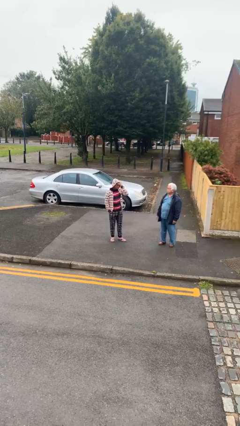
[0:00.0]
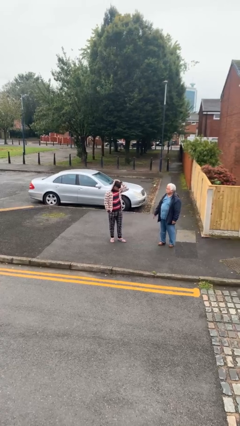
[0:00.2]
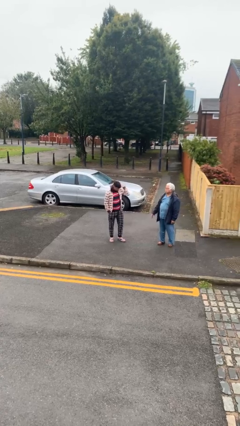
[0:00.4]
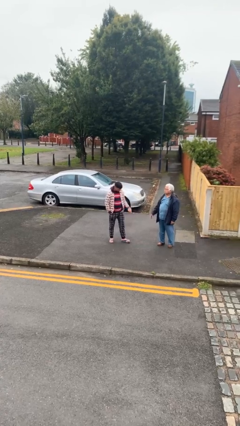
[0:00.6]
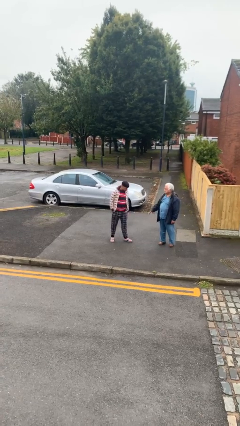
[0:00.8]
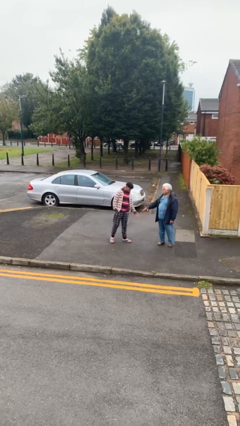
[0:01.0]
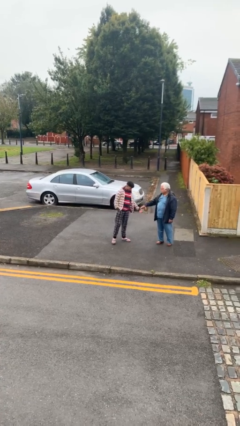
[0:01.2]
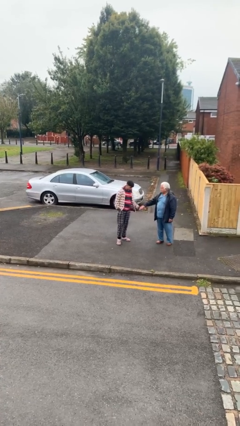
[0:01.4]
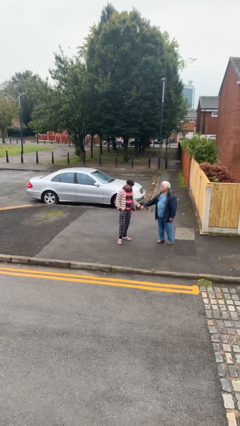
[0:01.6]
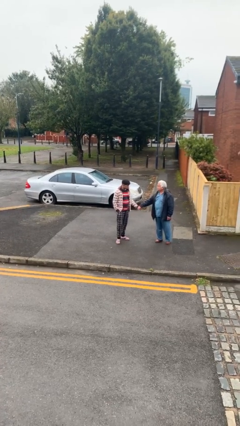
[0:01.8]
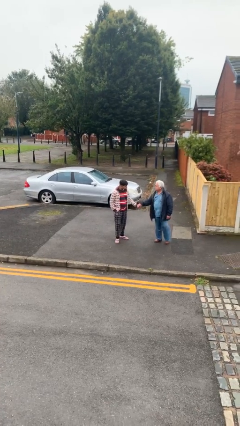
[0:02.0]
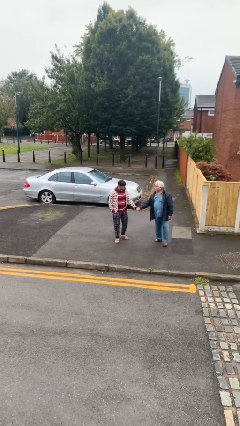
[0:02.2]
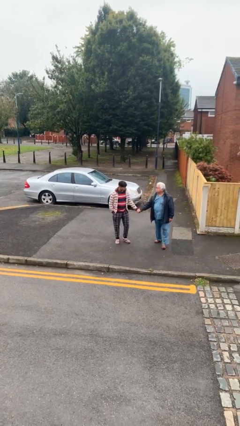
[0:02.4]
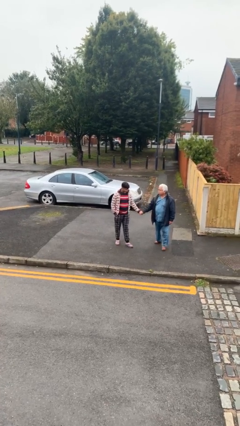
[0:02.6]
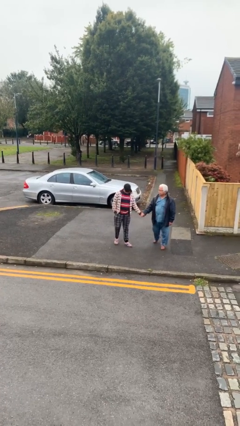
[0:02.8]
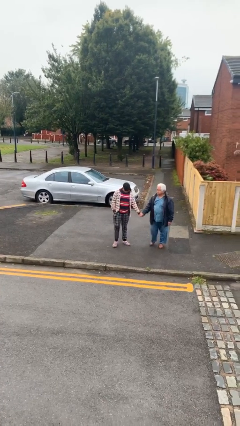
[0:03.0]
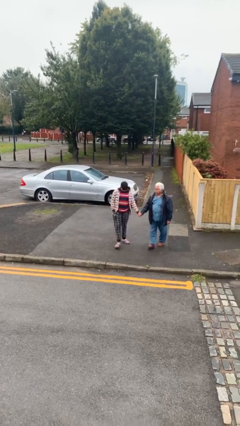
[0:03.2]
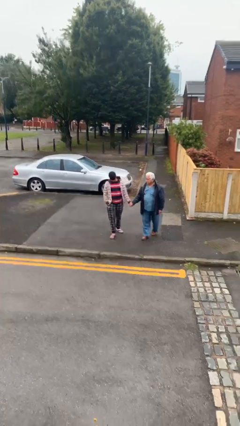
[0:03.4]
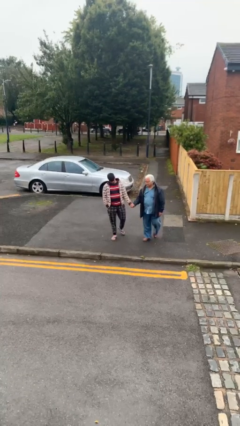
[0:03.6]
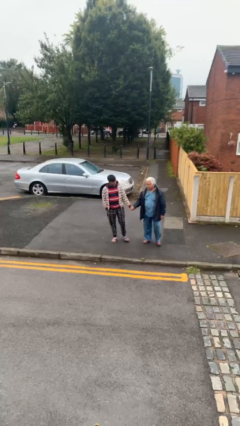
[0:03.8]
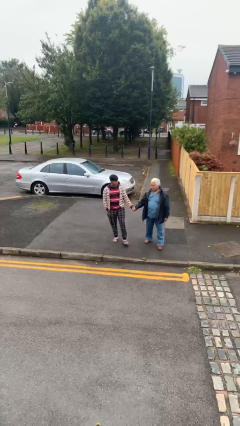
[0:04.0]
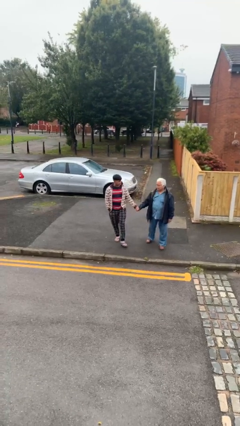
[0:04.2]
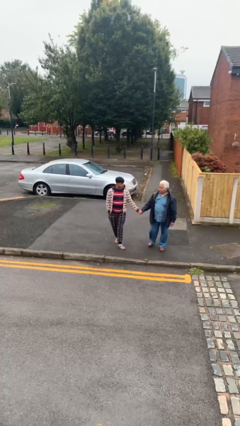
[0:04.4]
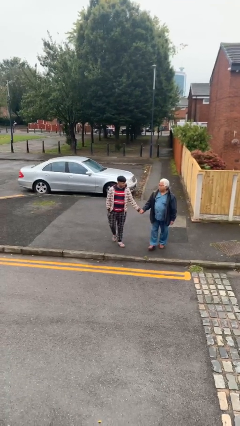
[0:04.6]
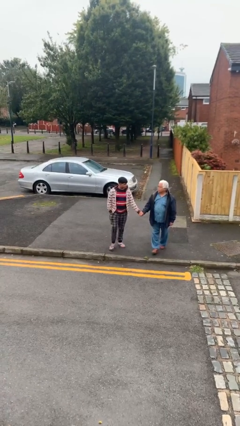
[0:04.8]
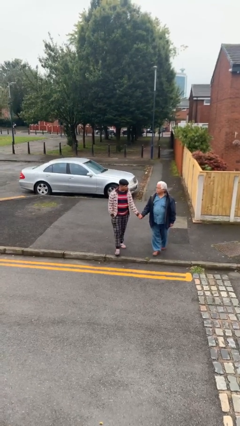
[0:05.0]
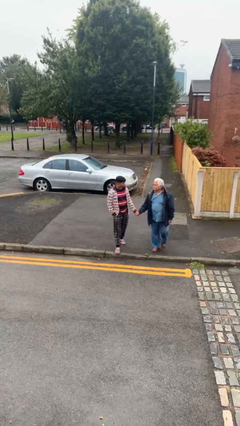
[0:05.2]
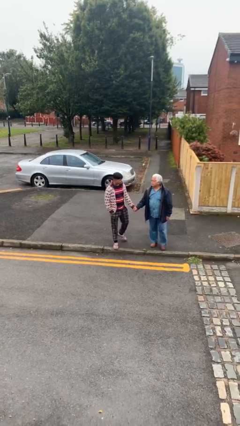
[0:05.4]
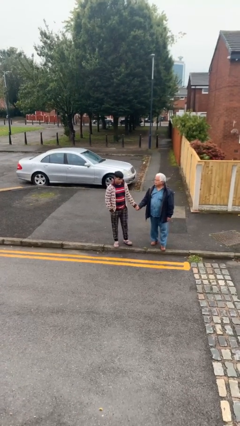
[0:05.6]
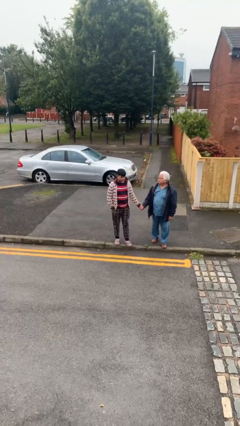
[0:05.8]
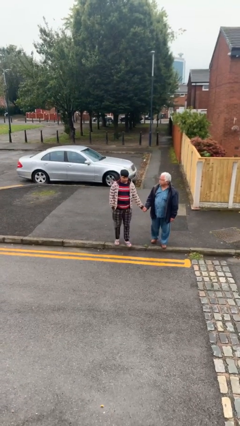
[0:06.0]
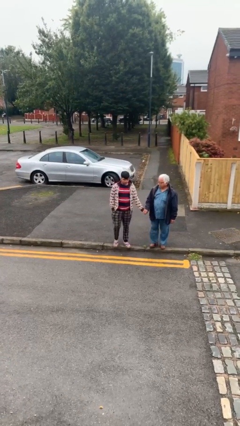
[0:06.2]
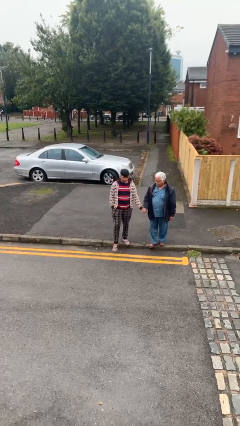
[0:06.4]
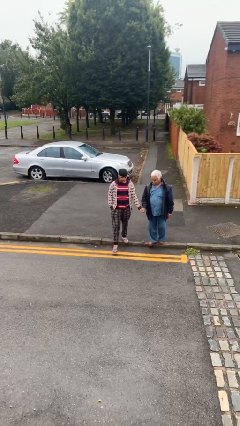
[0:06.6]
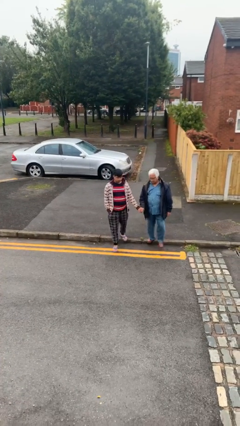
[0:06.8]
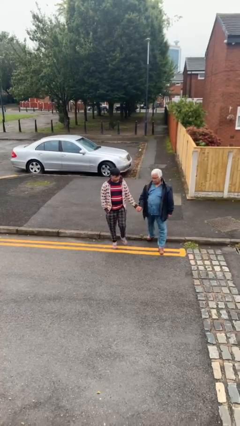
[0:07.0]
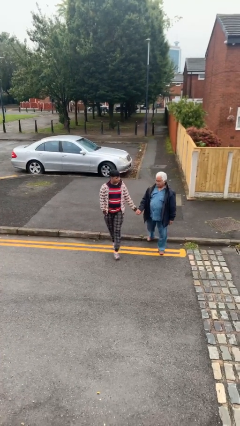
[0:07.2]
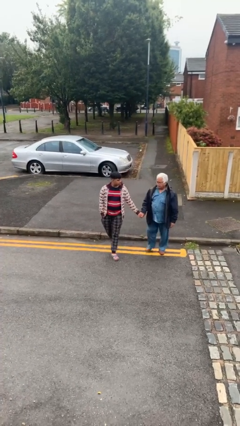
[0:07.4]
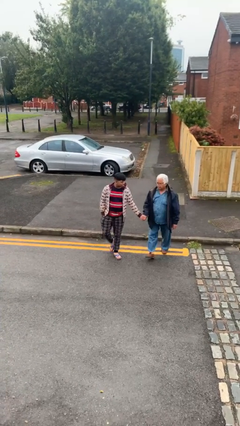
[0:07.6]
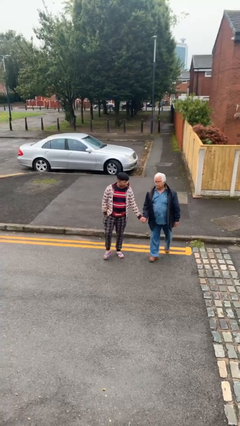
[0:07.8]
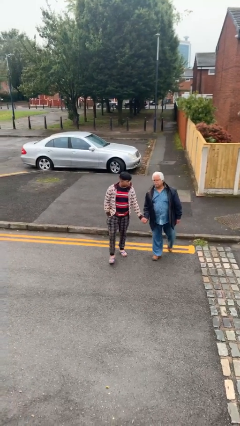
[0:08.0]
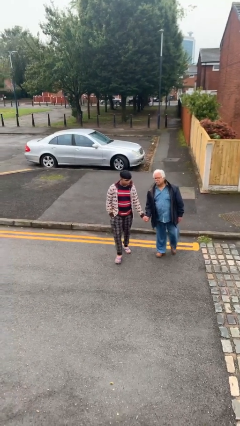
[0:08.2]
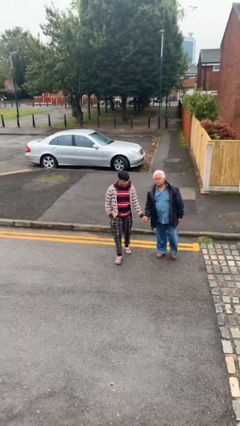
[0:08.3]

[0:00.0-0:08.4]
person holds hand

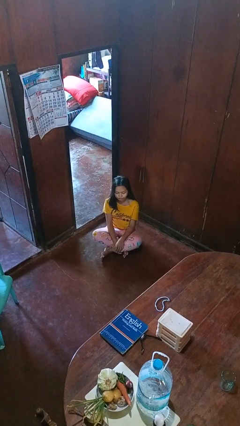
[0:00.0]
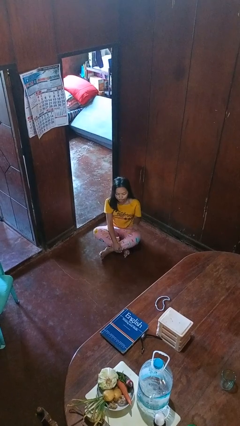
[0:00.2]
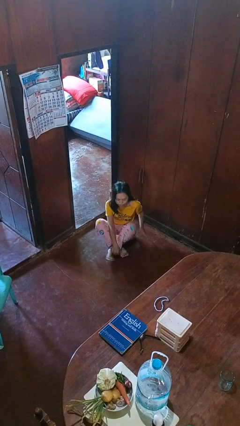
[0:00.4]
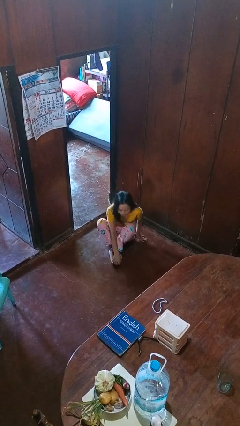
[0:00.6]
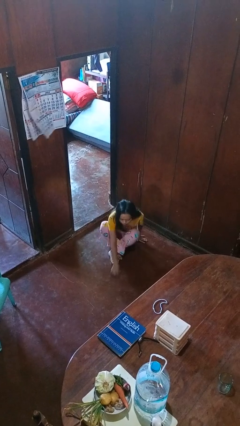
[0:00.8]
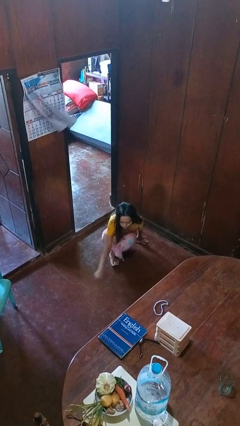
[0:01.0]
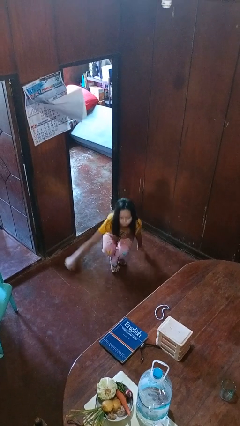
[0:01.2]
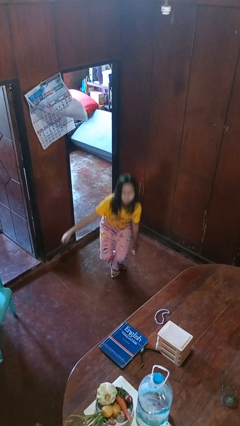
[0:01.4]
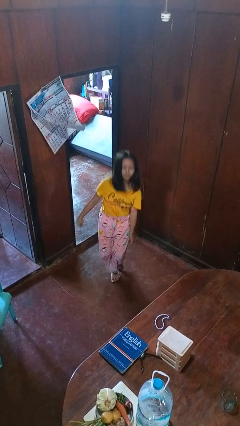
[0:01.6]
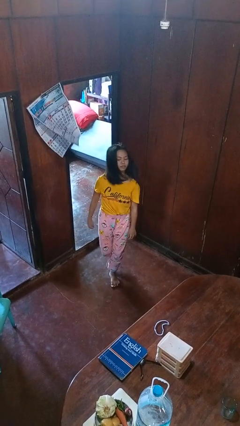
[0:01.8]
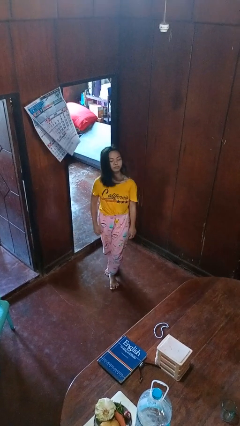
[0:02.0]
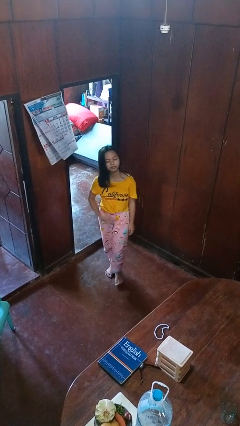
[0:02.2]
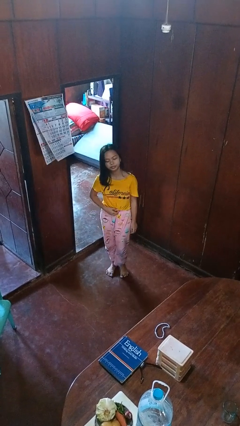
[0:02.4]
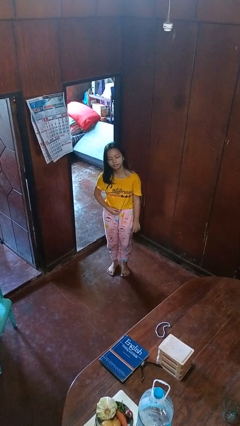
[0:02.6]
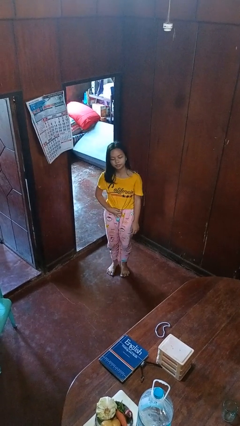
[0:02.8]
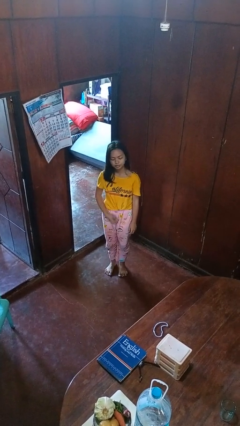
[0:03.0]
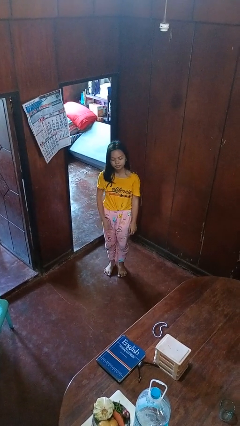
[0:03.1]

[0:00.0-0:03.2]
person stands up from floor

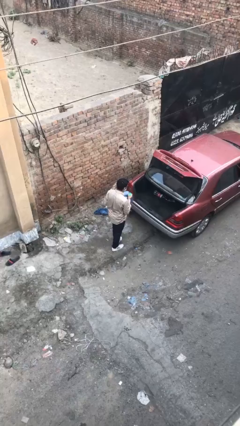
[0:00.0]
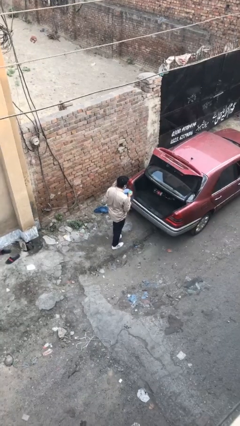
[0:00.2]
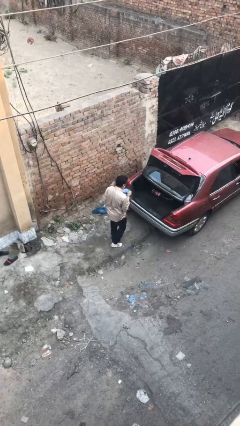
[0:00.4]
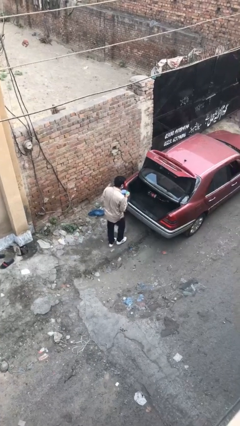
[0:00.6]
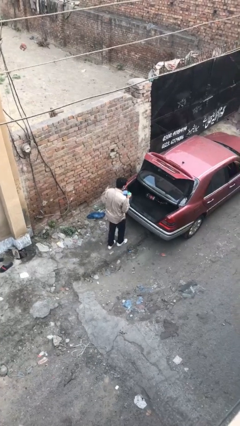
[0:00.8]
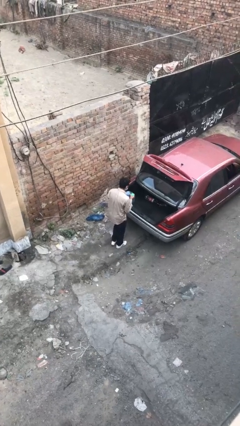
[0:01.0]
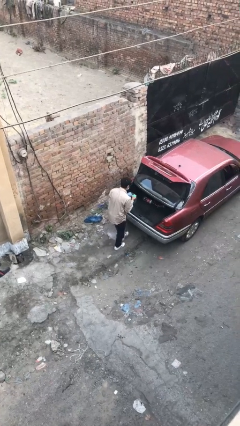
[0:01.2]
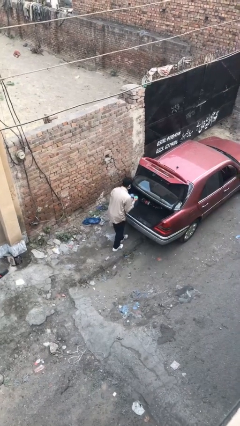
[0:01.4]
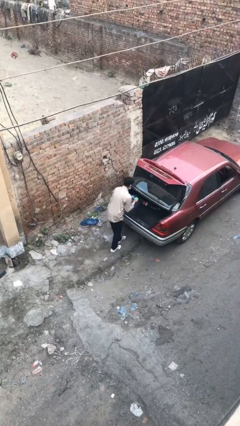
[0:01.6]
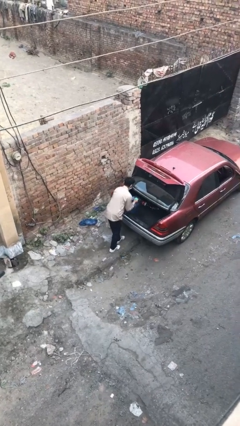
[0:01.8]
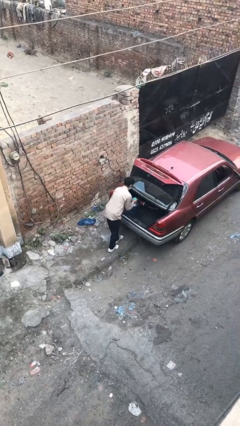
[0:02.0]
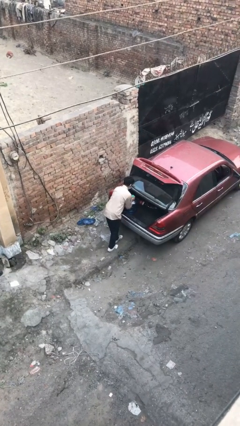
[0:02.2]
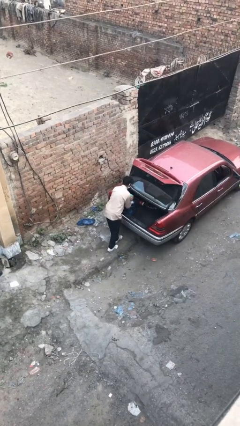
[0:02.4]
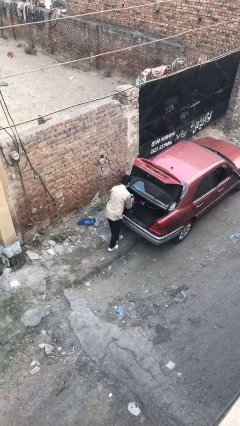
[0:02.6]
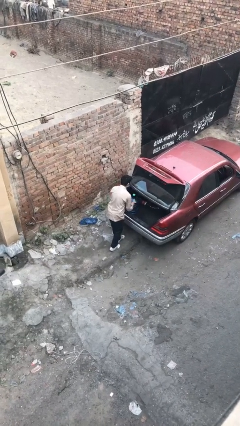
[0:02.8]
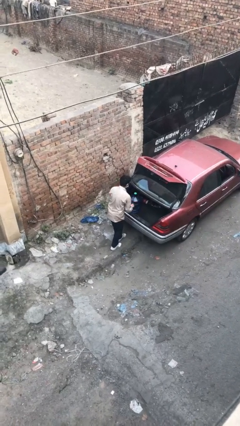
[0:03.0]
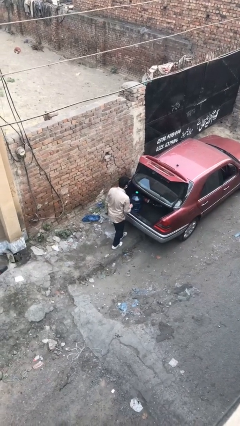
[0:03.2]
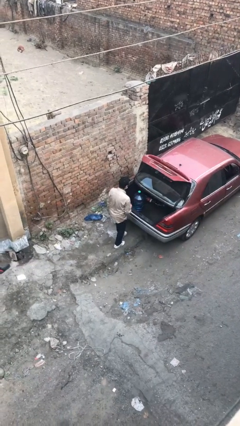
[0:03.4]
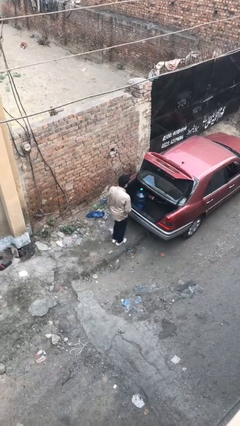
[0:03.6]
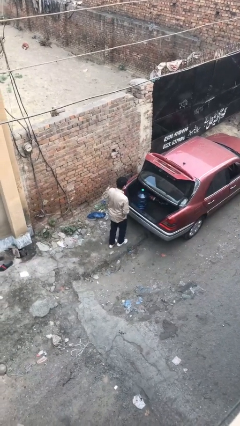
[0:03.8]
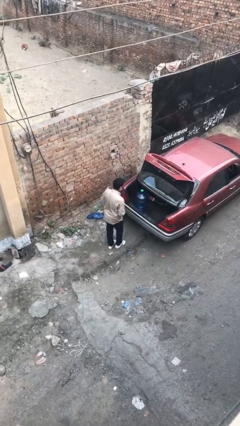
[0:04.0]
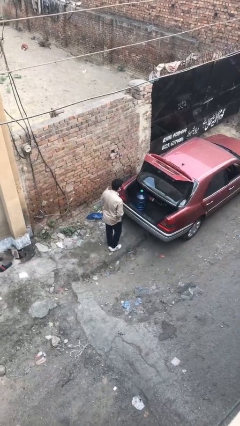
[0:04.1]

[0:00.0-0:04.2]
person loads car

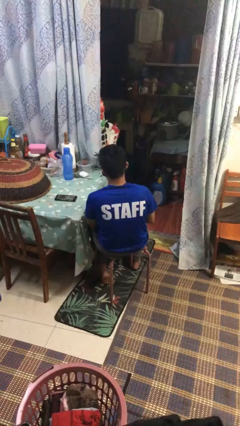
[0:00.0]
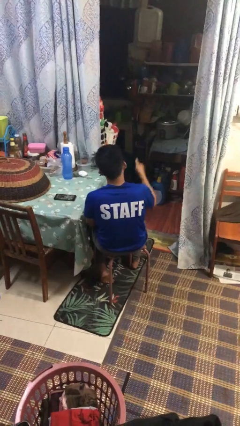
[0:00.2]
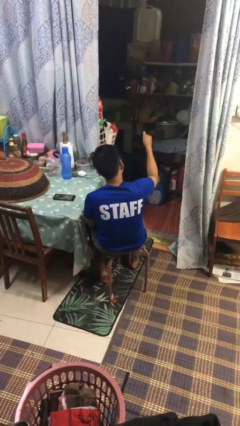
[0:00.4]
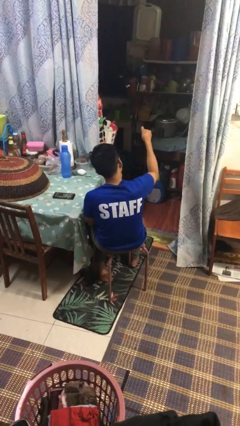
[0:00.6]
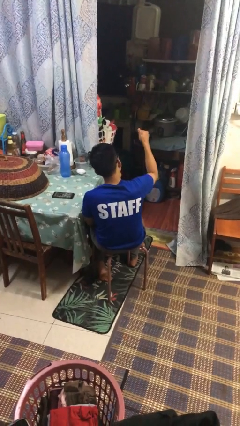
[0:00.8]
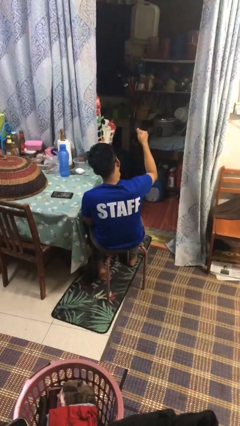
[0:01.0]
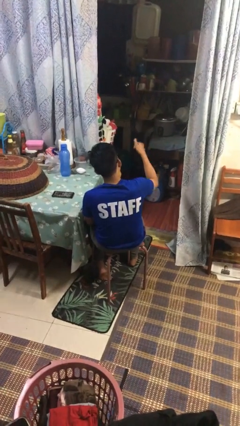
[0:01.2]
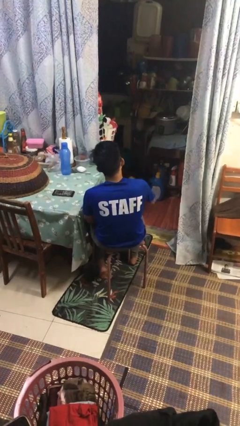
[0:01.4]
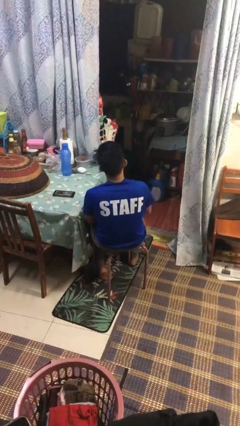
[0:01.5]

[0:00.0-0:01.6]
person gestures thumbs up

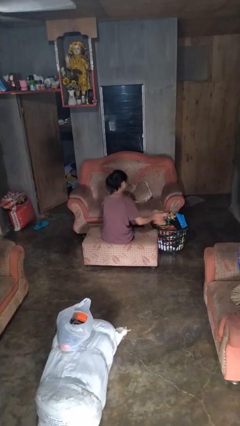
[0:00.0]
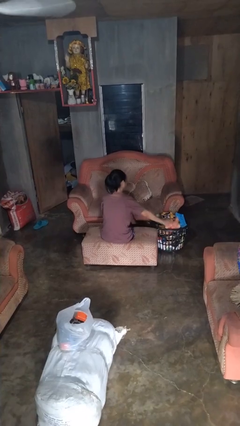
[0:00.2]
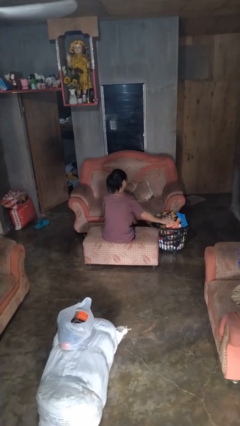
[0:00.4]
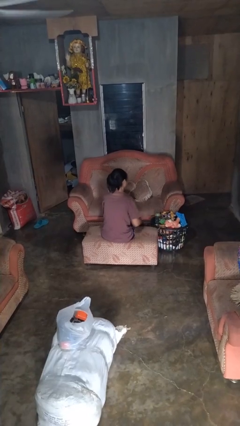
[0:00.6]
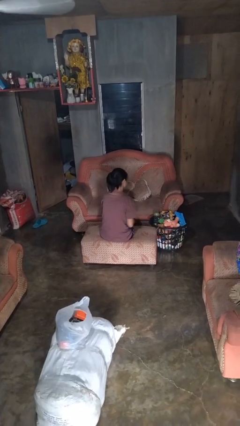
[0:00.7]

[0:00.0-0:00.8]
person puts object into basket
